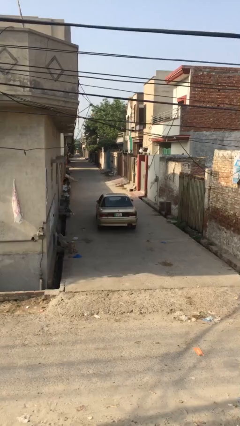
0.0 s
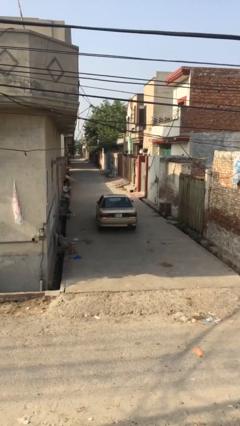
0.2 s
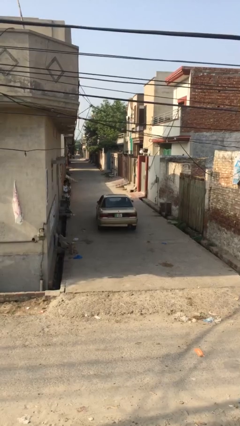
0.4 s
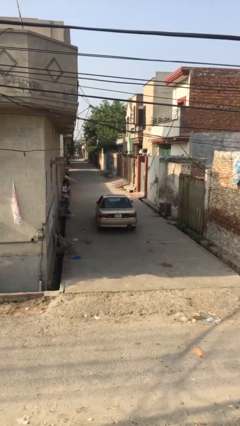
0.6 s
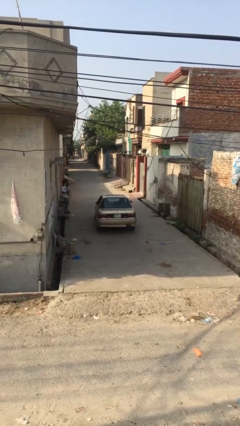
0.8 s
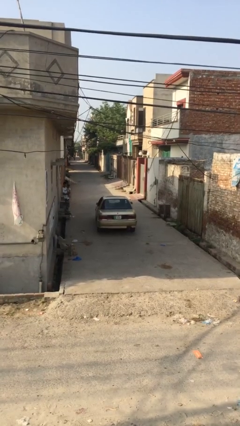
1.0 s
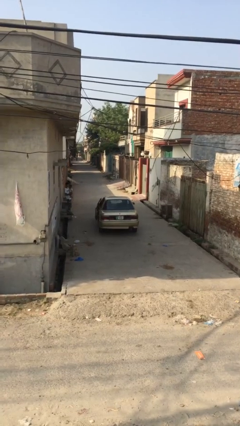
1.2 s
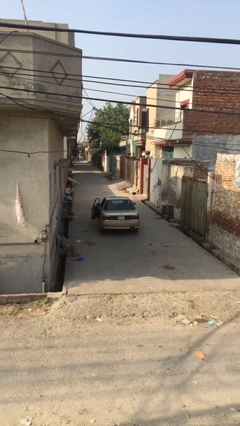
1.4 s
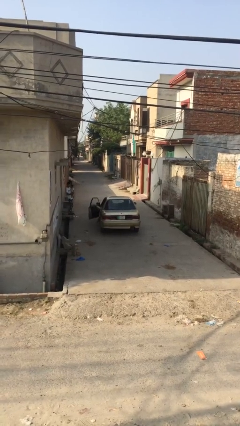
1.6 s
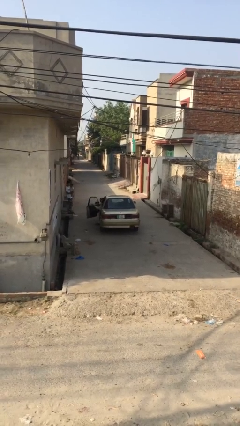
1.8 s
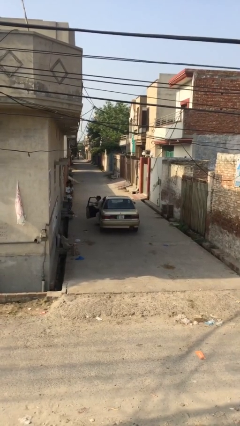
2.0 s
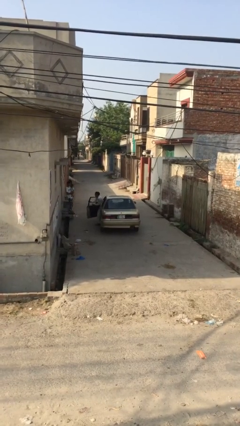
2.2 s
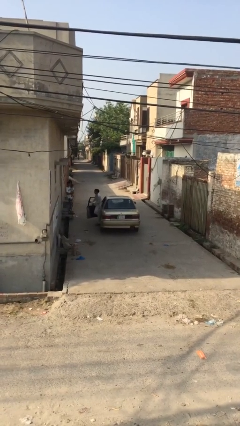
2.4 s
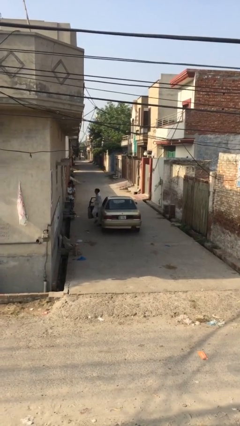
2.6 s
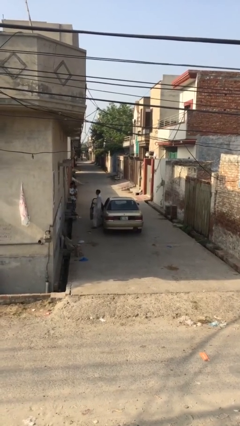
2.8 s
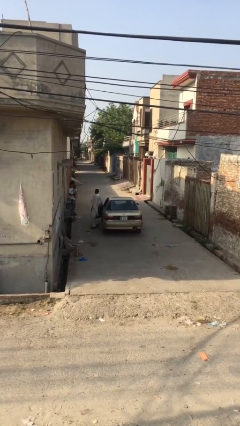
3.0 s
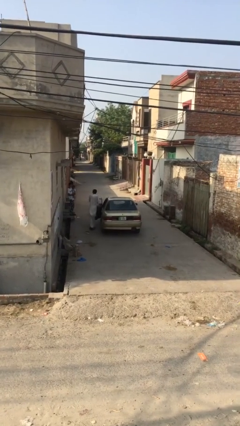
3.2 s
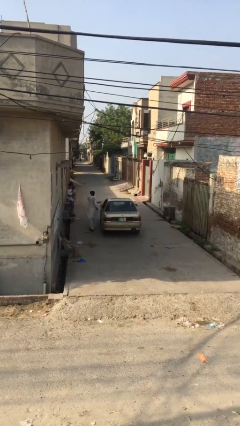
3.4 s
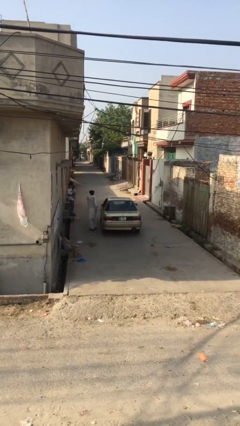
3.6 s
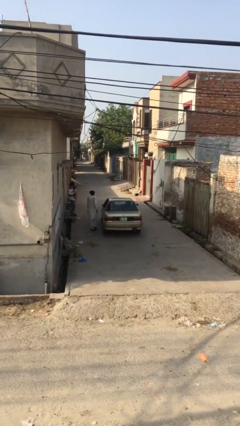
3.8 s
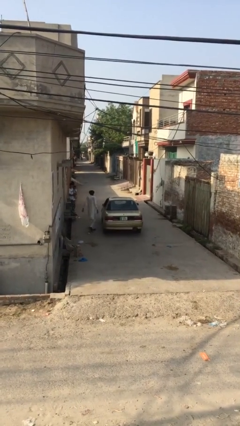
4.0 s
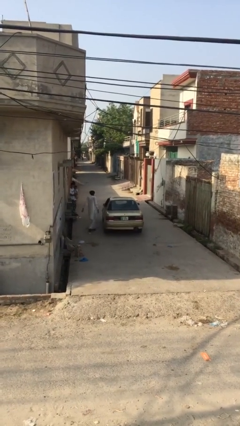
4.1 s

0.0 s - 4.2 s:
car drops off person

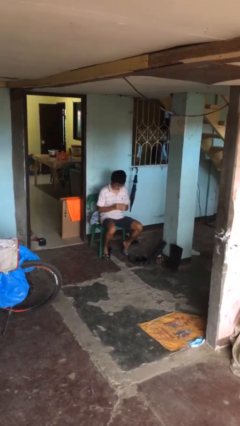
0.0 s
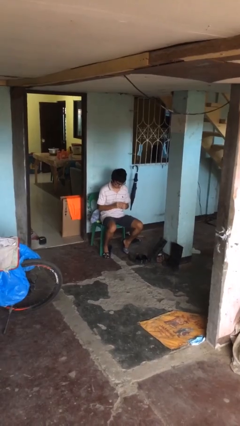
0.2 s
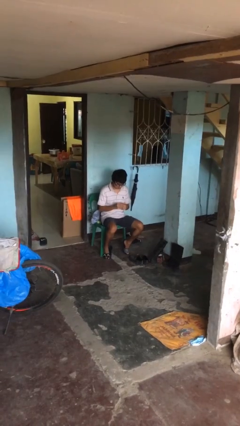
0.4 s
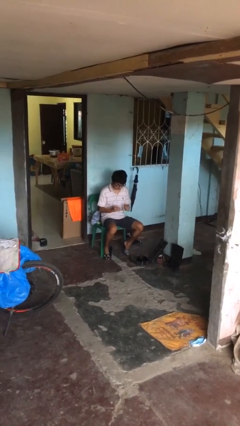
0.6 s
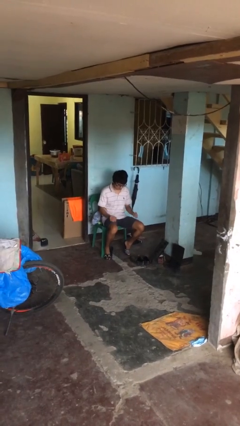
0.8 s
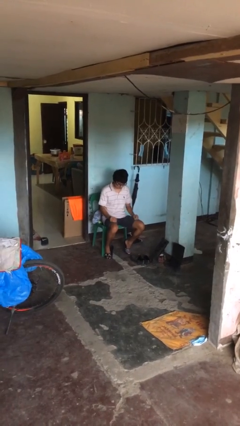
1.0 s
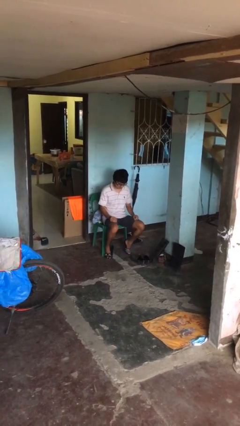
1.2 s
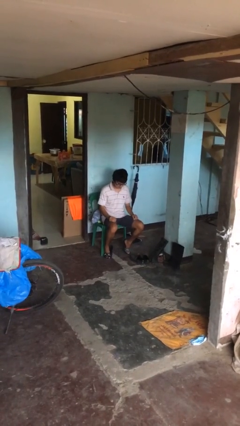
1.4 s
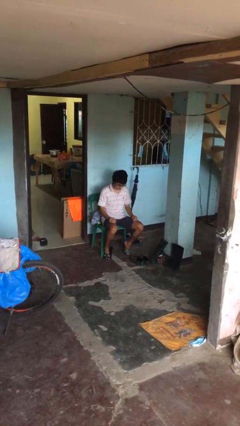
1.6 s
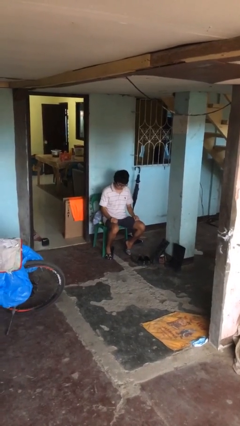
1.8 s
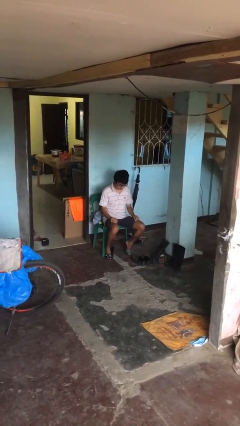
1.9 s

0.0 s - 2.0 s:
person takes off ring

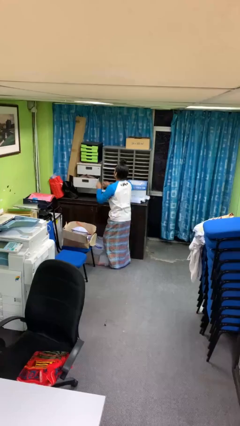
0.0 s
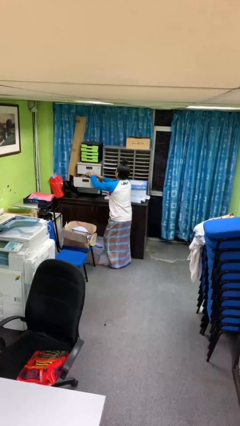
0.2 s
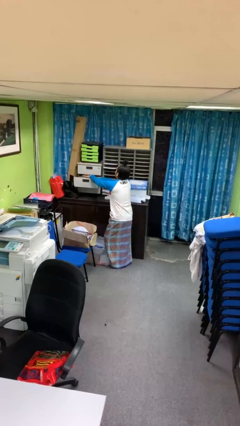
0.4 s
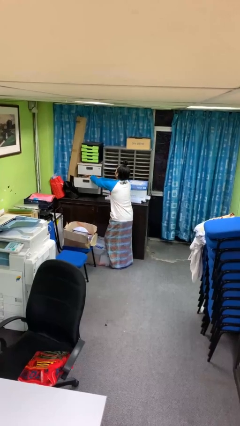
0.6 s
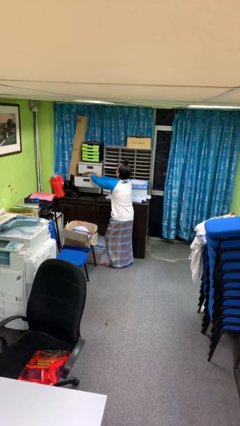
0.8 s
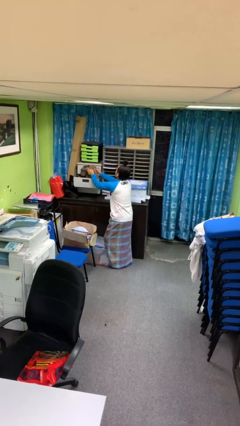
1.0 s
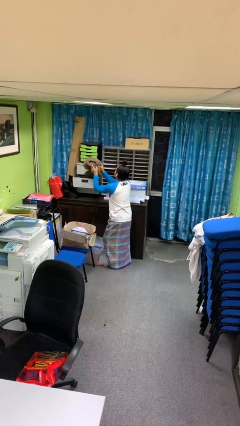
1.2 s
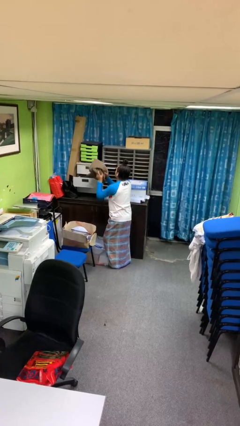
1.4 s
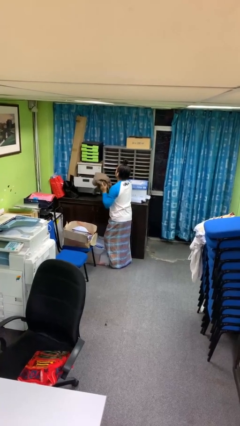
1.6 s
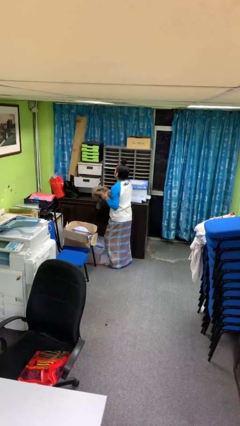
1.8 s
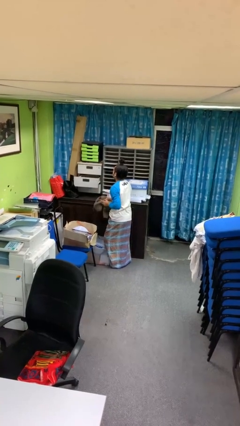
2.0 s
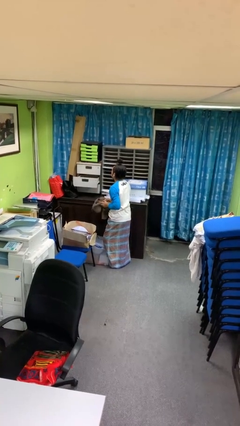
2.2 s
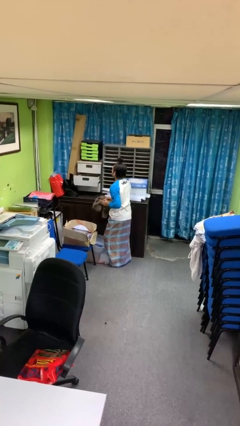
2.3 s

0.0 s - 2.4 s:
person takes clothes from dresser

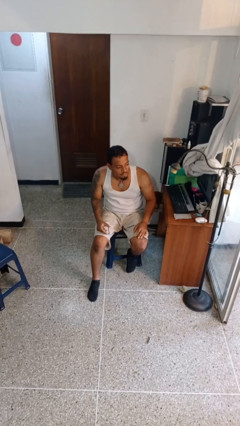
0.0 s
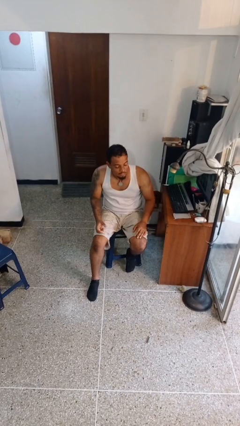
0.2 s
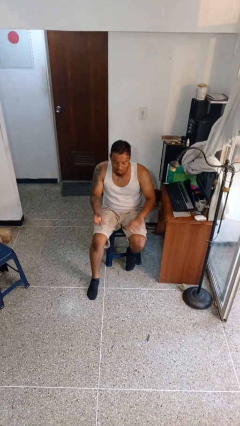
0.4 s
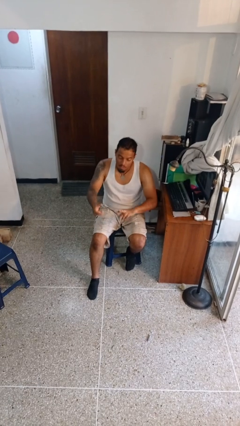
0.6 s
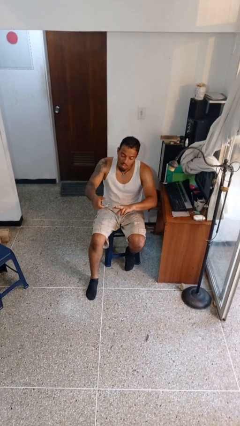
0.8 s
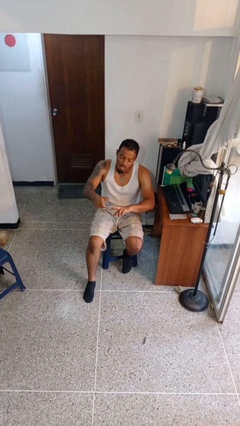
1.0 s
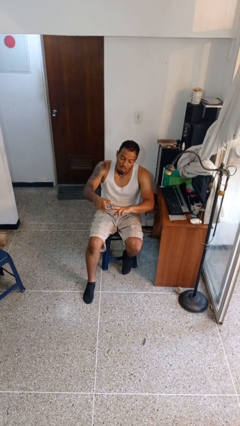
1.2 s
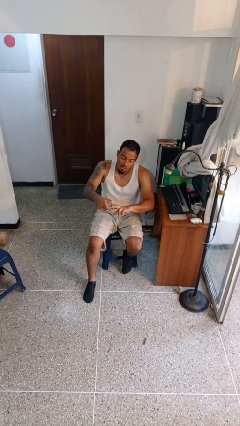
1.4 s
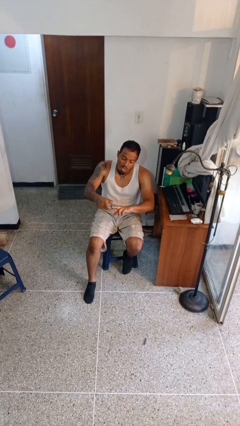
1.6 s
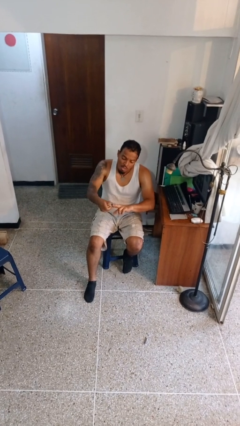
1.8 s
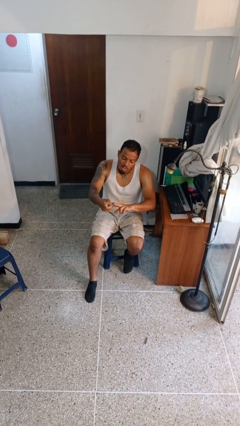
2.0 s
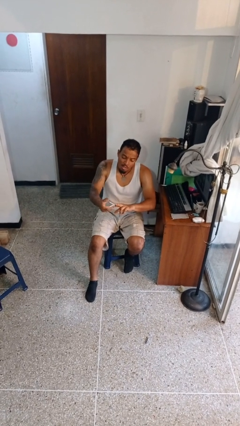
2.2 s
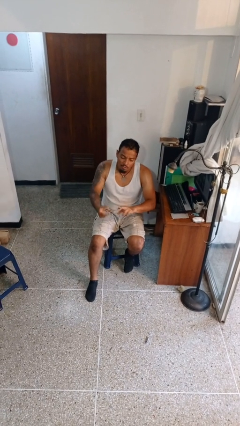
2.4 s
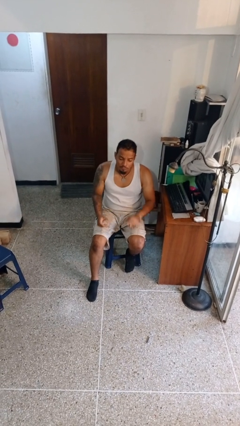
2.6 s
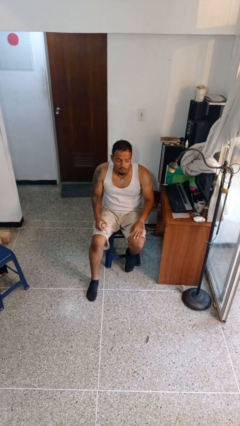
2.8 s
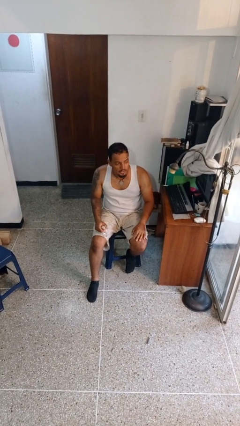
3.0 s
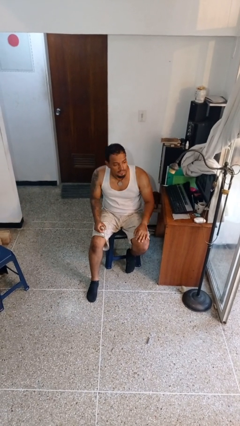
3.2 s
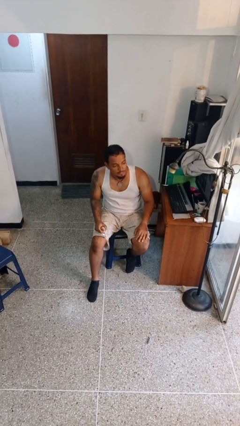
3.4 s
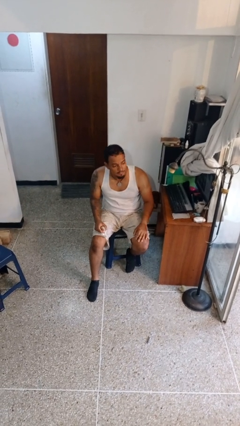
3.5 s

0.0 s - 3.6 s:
person clips fingernails

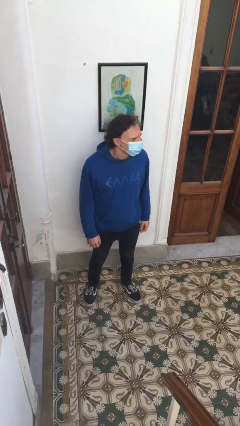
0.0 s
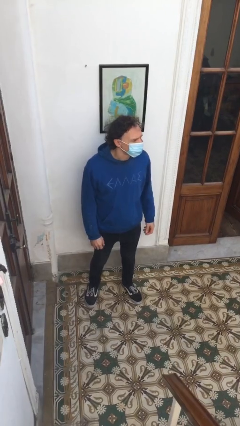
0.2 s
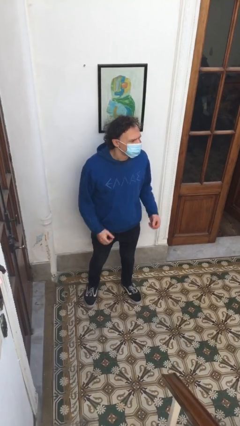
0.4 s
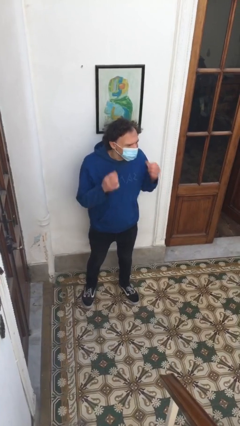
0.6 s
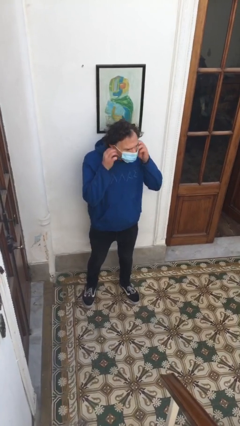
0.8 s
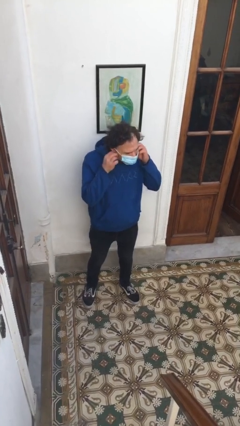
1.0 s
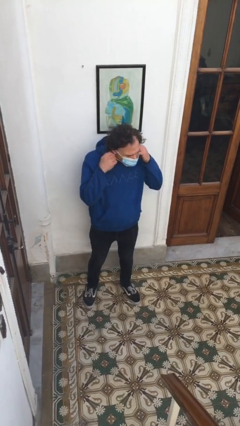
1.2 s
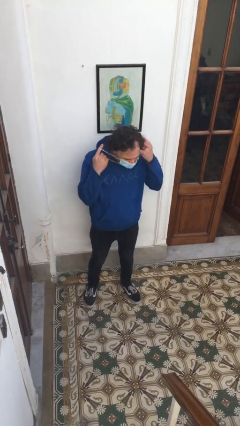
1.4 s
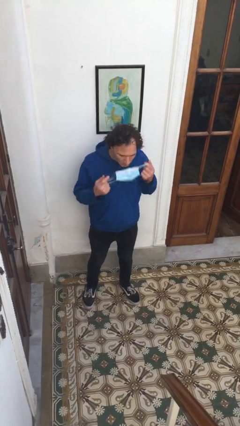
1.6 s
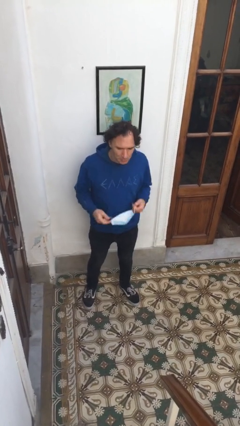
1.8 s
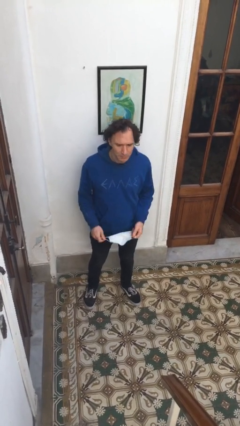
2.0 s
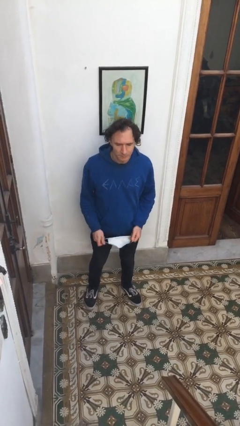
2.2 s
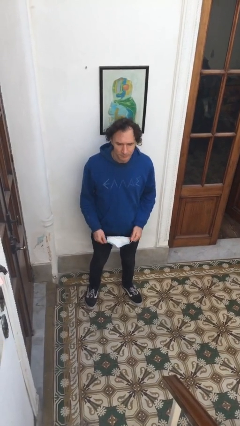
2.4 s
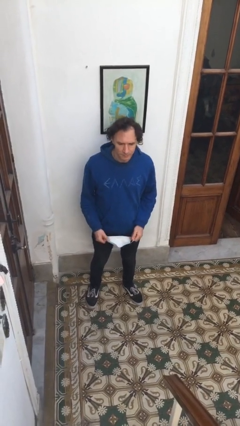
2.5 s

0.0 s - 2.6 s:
person takes off facemask

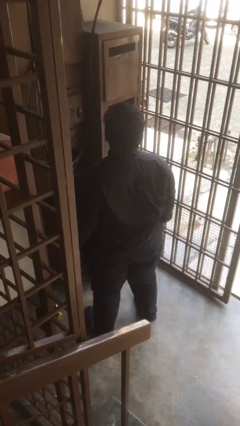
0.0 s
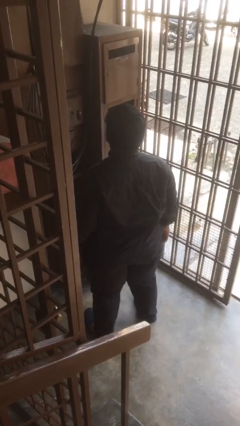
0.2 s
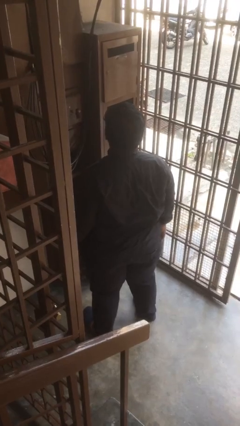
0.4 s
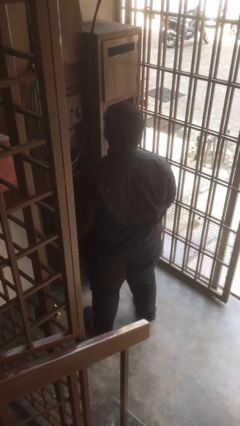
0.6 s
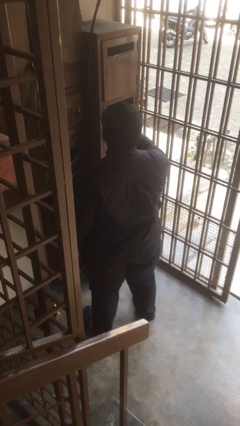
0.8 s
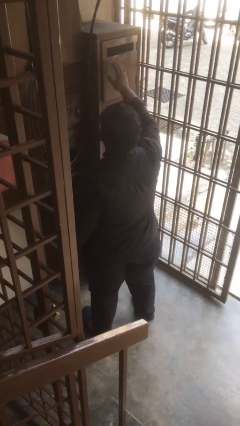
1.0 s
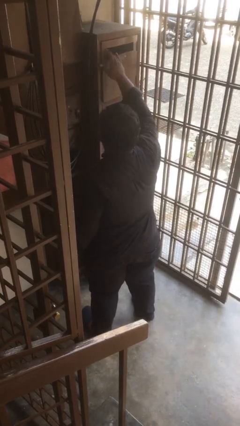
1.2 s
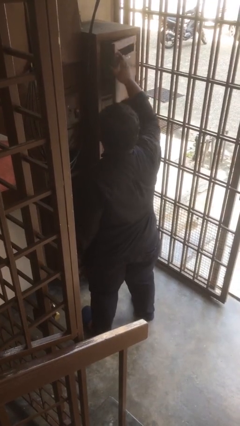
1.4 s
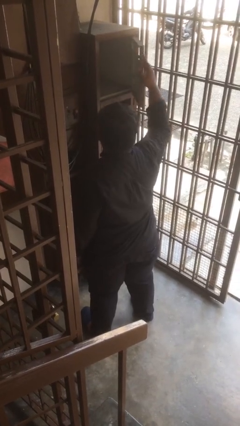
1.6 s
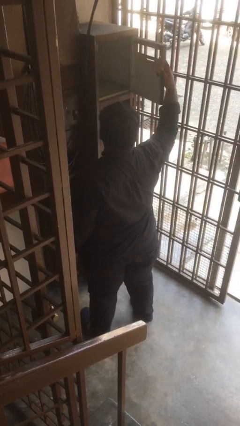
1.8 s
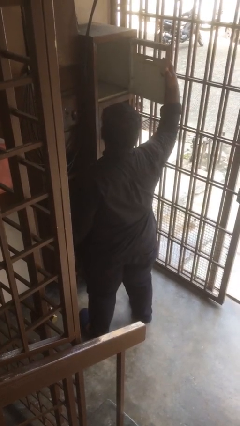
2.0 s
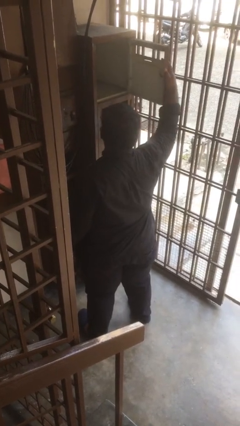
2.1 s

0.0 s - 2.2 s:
person opens mailbox
